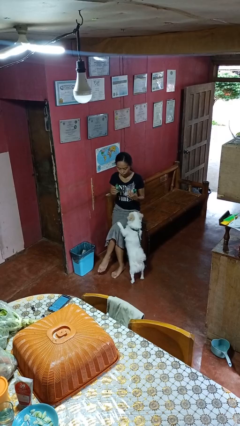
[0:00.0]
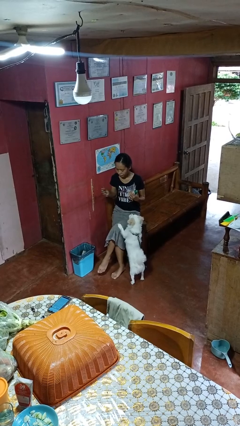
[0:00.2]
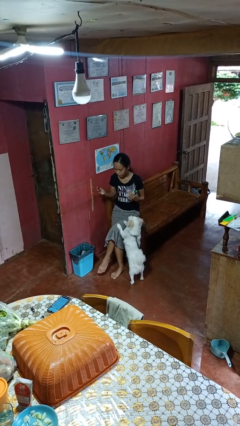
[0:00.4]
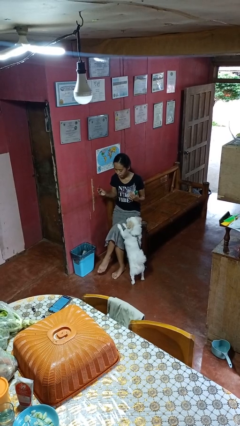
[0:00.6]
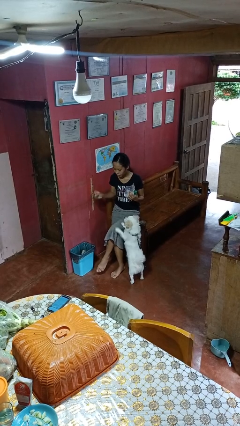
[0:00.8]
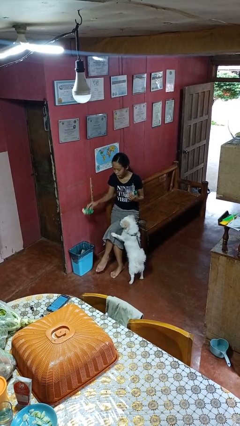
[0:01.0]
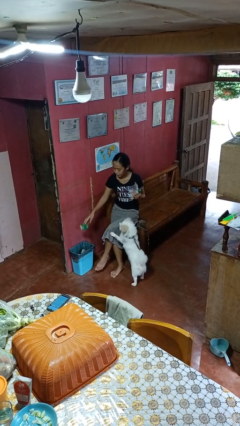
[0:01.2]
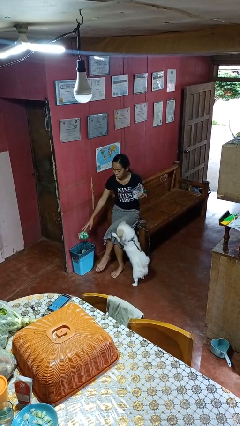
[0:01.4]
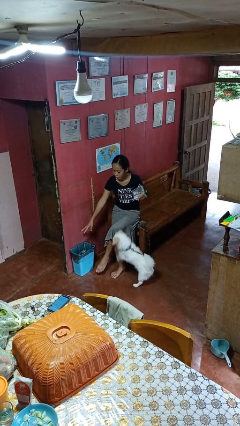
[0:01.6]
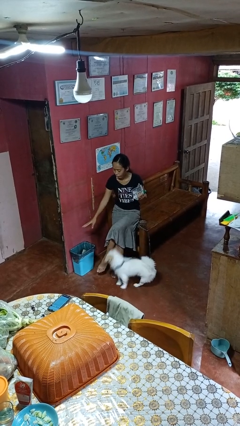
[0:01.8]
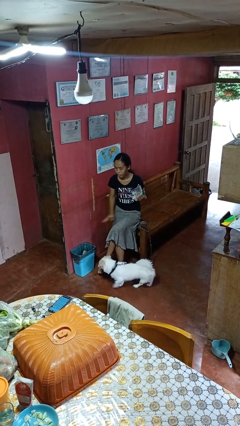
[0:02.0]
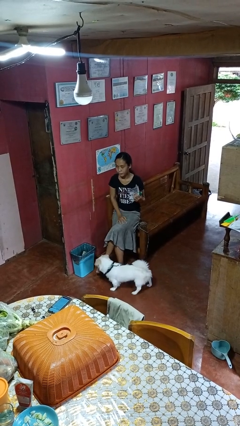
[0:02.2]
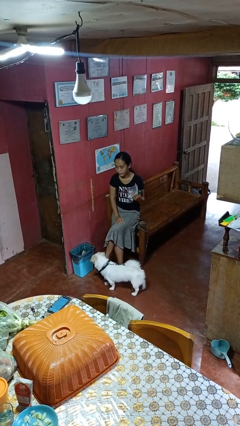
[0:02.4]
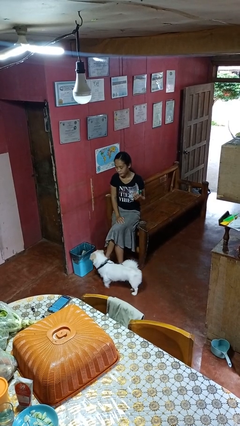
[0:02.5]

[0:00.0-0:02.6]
person discards trash

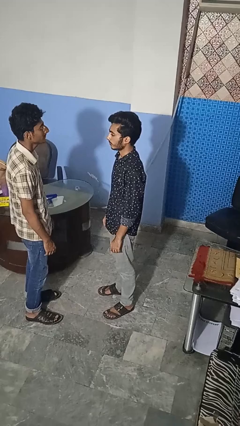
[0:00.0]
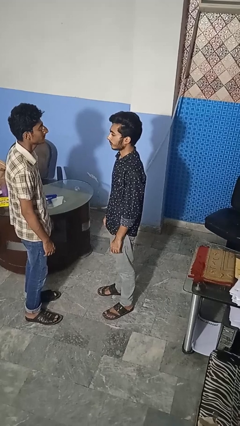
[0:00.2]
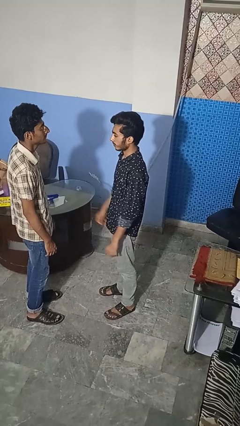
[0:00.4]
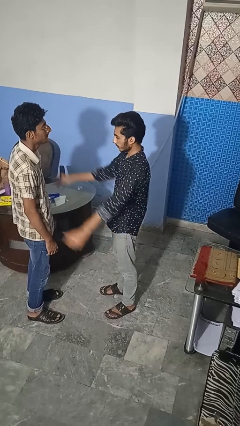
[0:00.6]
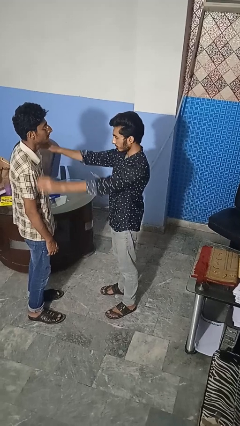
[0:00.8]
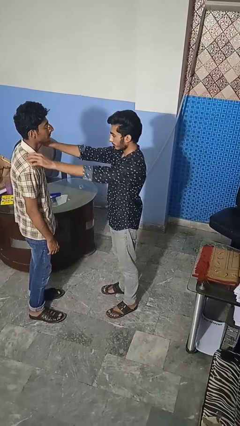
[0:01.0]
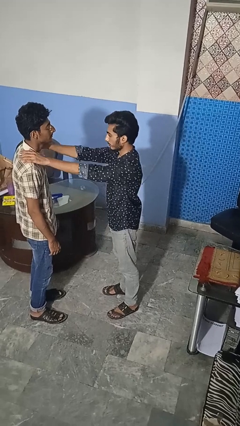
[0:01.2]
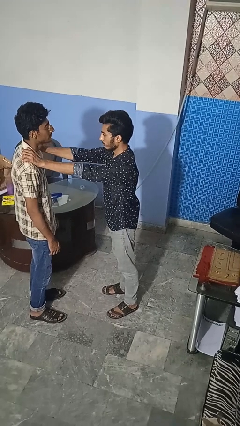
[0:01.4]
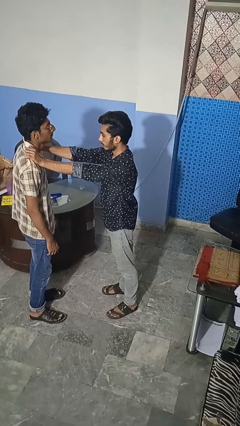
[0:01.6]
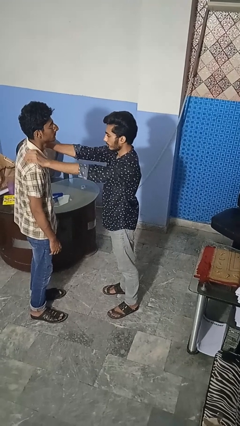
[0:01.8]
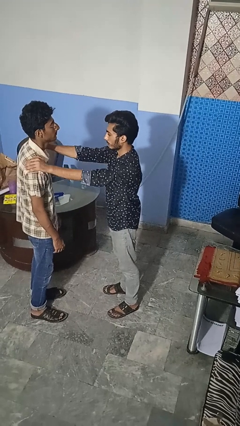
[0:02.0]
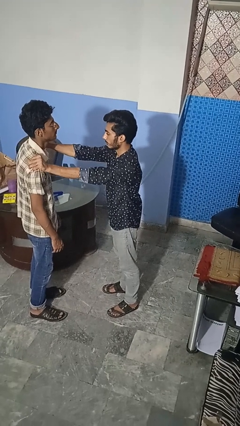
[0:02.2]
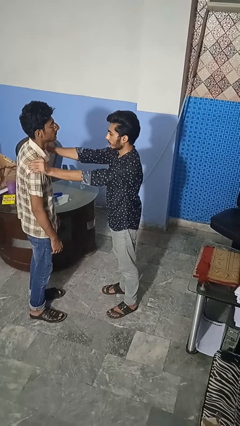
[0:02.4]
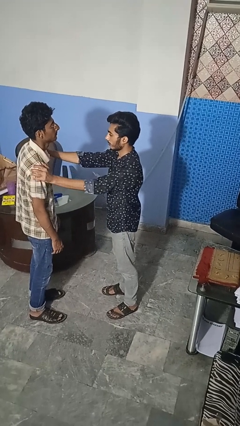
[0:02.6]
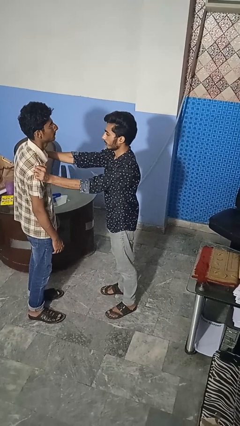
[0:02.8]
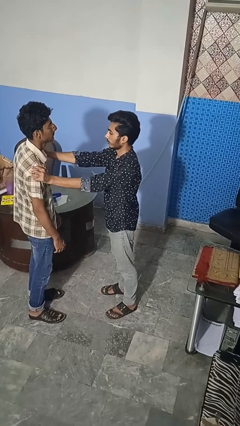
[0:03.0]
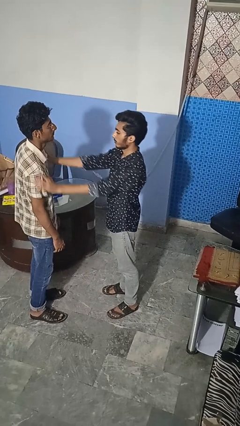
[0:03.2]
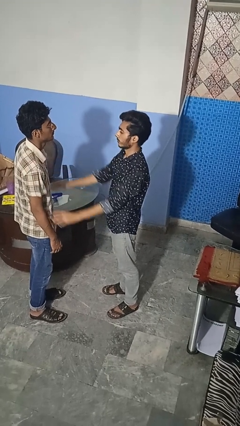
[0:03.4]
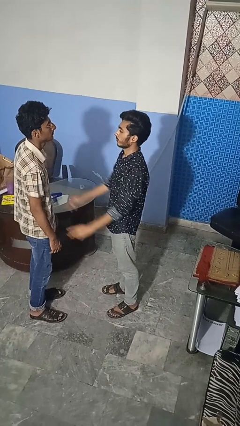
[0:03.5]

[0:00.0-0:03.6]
person pounds shoulders of person

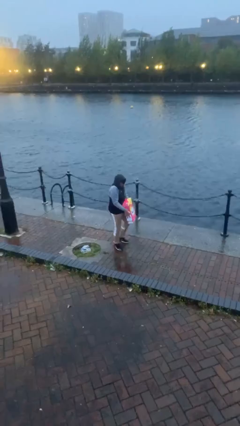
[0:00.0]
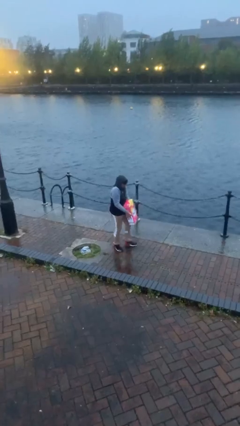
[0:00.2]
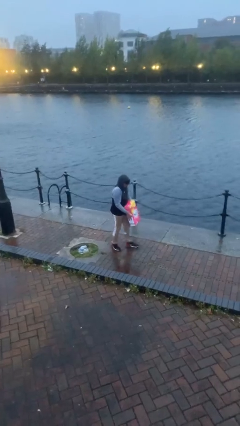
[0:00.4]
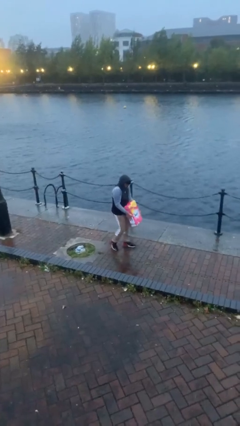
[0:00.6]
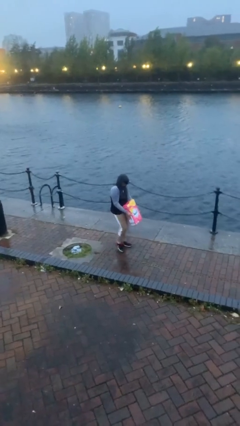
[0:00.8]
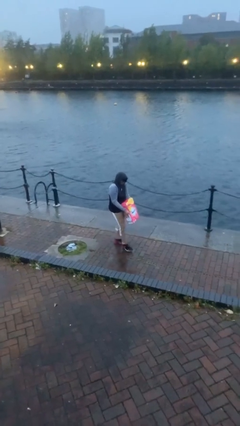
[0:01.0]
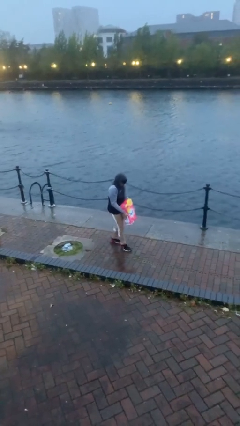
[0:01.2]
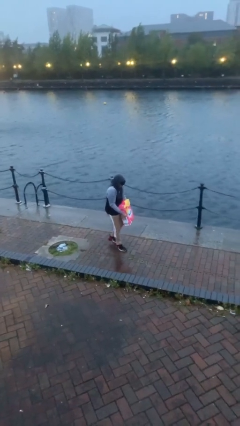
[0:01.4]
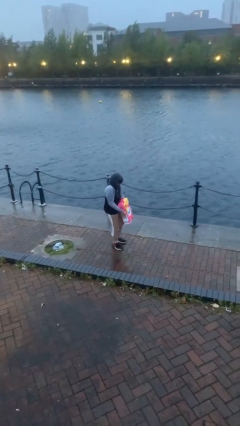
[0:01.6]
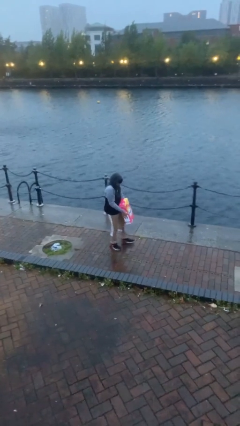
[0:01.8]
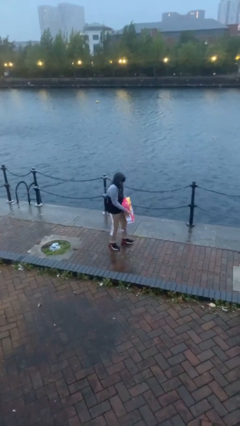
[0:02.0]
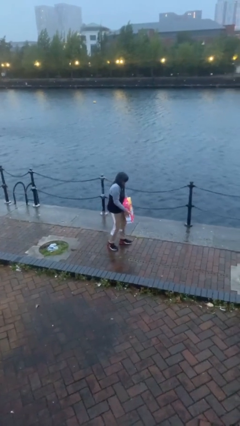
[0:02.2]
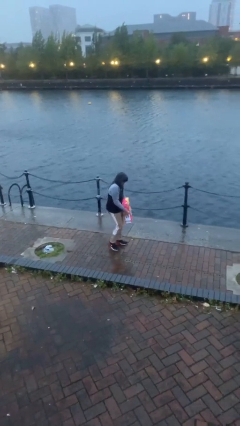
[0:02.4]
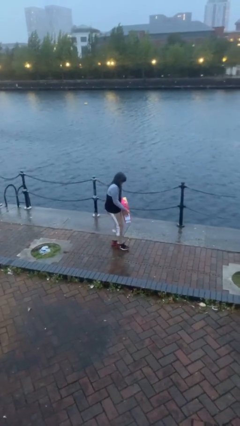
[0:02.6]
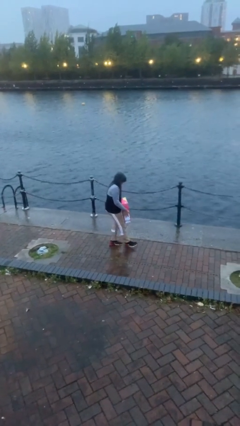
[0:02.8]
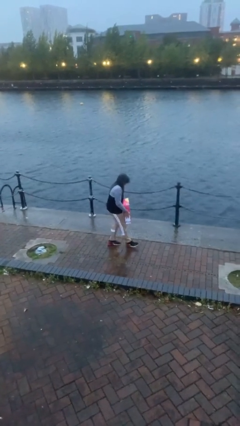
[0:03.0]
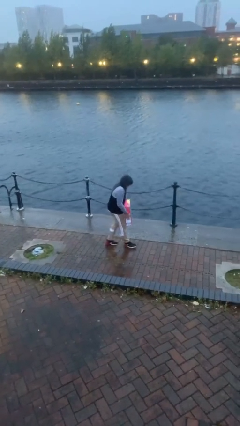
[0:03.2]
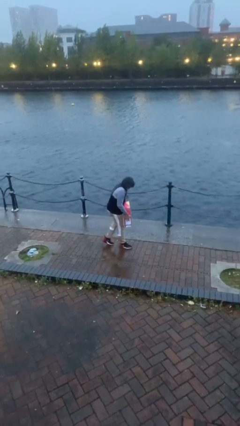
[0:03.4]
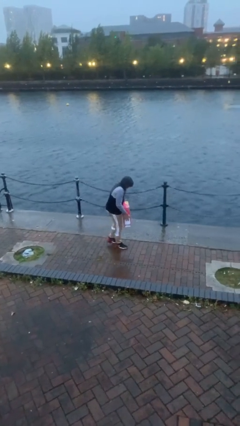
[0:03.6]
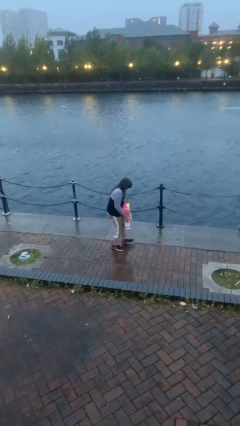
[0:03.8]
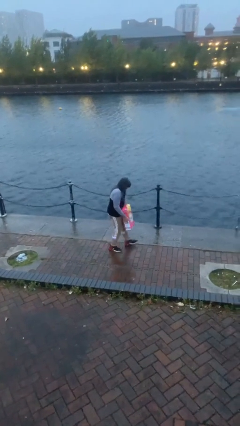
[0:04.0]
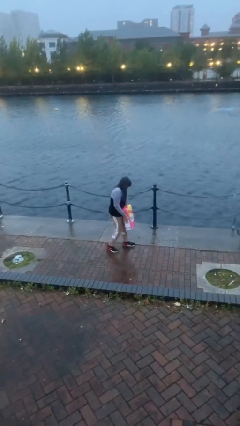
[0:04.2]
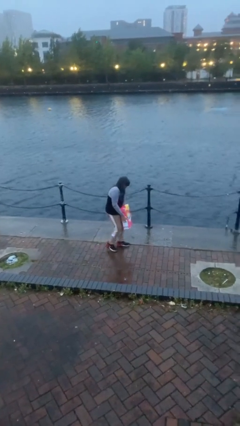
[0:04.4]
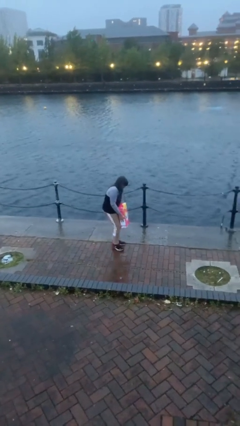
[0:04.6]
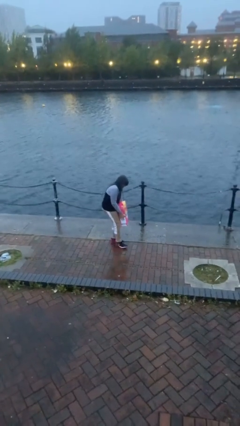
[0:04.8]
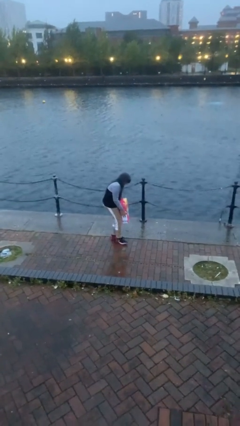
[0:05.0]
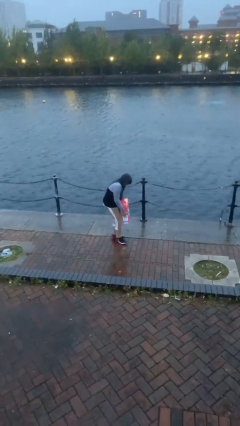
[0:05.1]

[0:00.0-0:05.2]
person carries heavy object

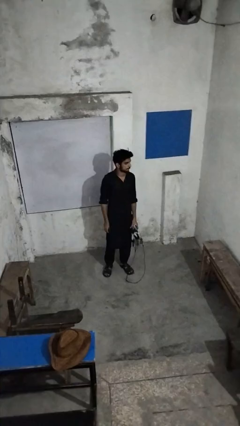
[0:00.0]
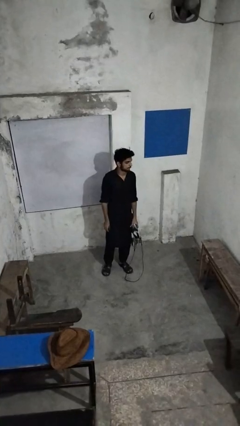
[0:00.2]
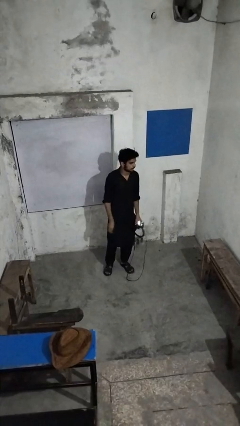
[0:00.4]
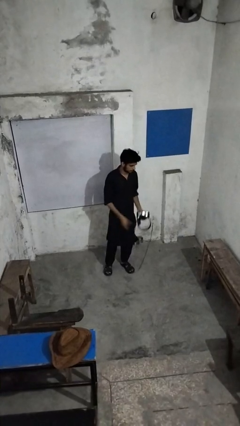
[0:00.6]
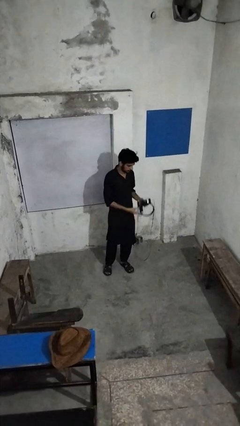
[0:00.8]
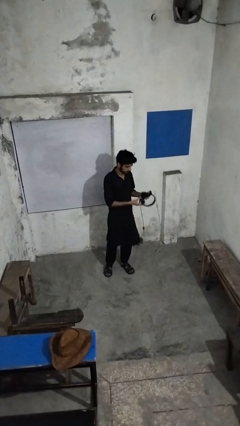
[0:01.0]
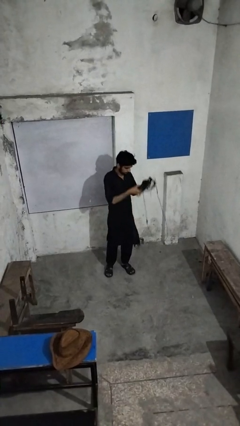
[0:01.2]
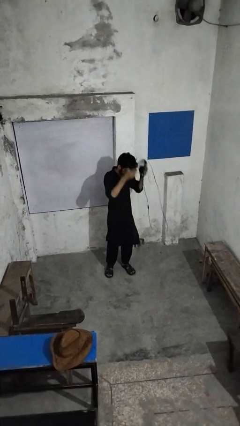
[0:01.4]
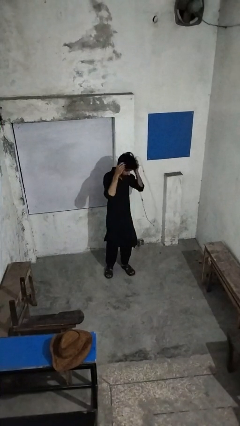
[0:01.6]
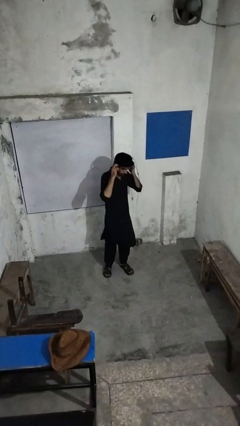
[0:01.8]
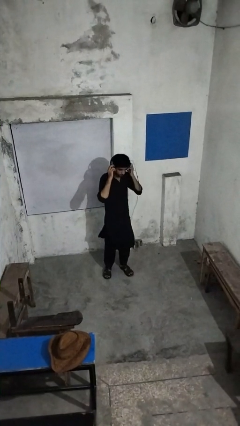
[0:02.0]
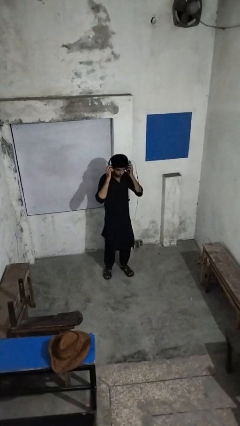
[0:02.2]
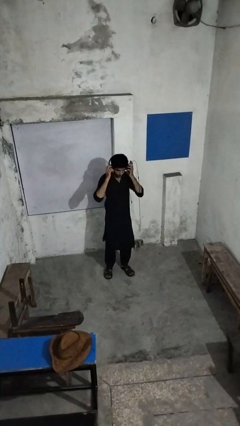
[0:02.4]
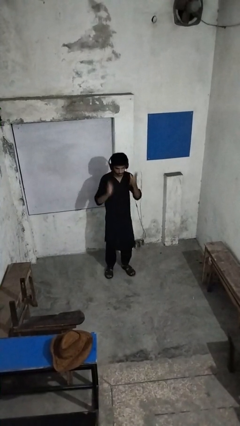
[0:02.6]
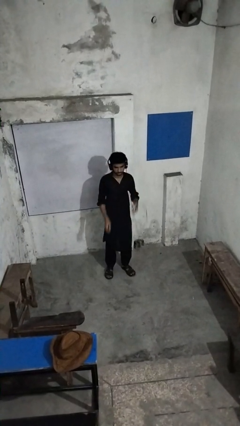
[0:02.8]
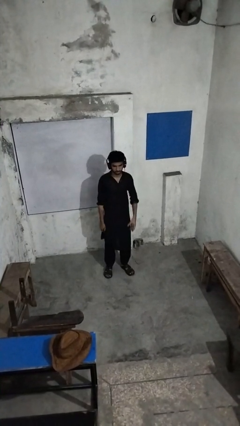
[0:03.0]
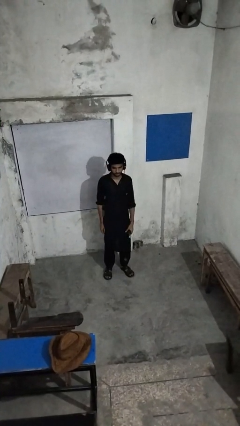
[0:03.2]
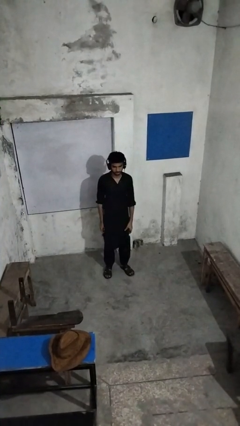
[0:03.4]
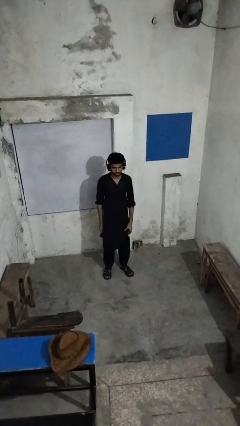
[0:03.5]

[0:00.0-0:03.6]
person puts on headphones

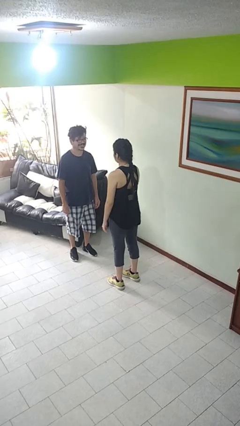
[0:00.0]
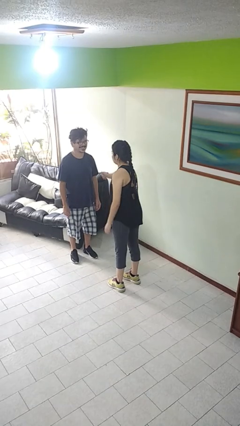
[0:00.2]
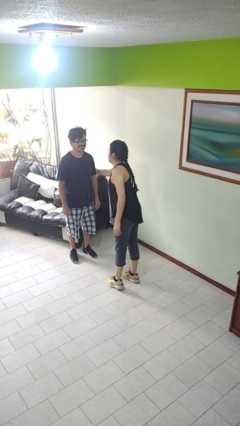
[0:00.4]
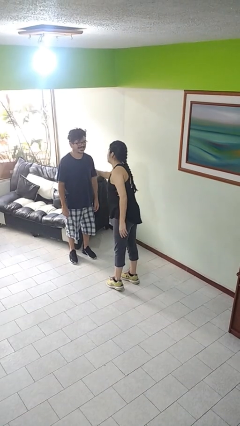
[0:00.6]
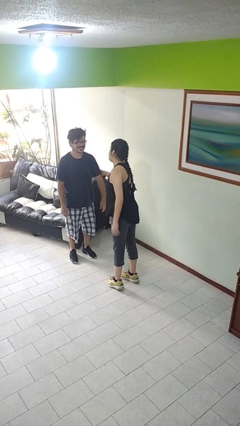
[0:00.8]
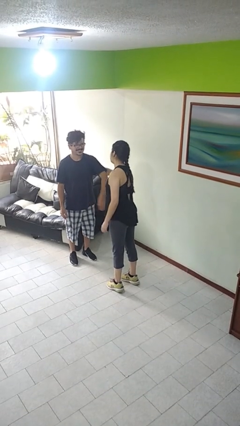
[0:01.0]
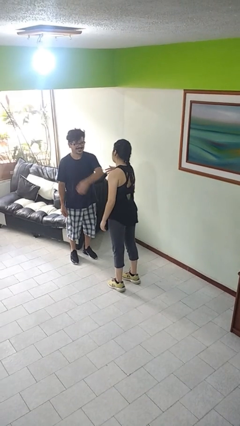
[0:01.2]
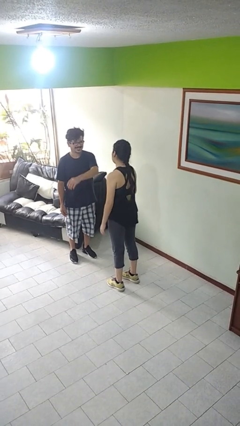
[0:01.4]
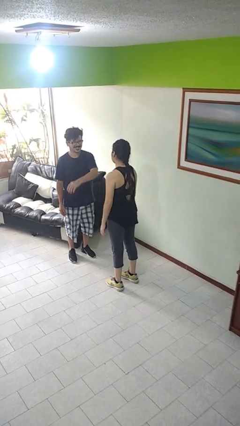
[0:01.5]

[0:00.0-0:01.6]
person grabs person by bicep

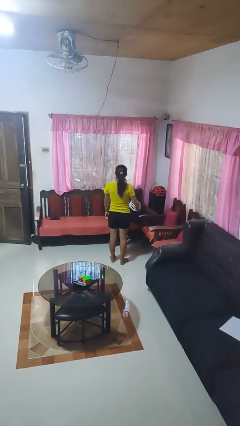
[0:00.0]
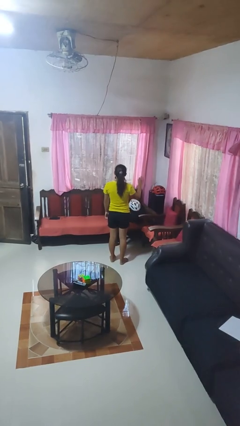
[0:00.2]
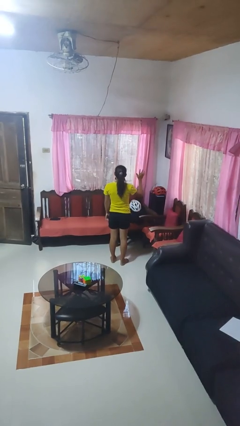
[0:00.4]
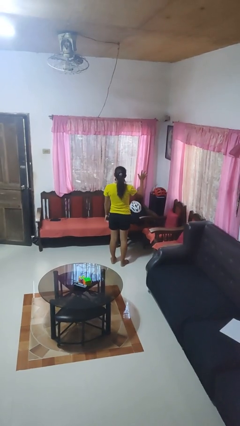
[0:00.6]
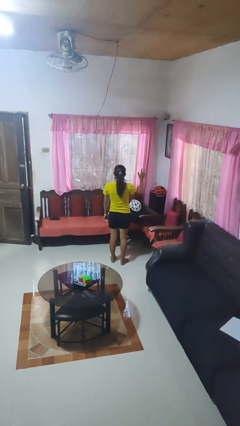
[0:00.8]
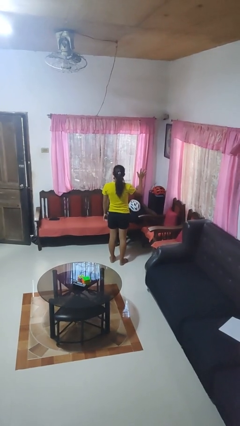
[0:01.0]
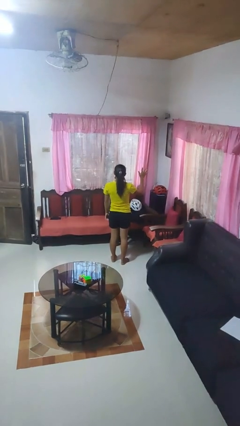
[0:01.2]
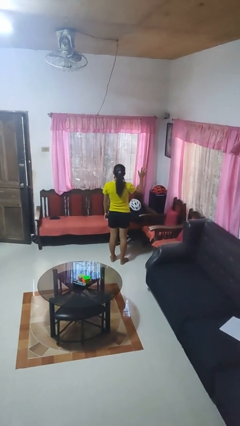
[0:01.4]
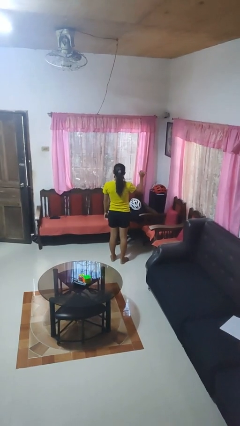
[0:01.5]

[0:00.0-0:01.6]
person gestures number five
